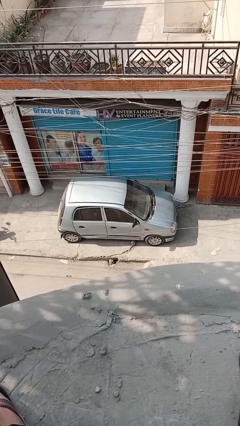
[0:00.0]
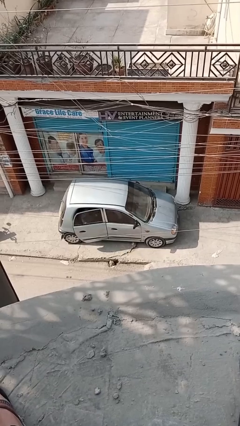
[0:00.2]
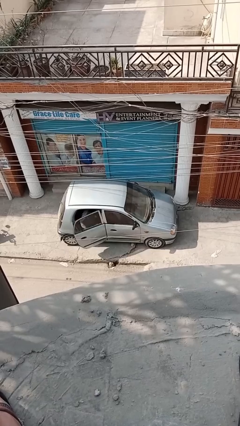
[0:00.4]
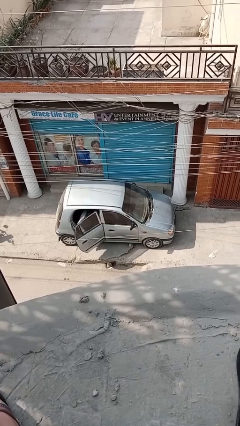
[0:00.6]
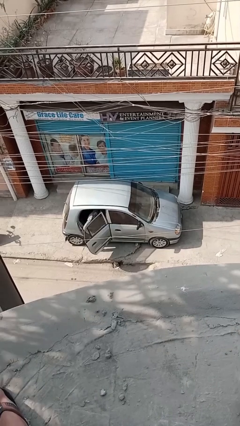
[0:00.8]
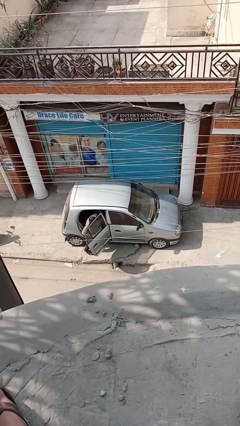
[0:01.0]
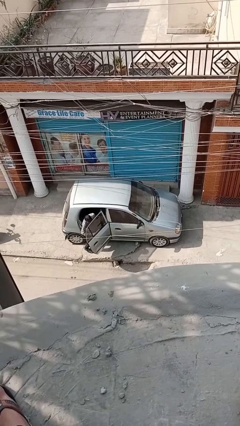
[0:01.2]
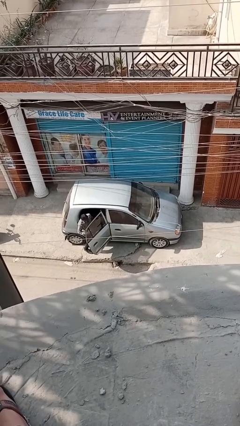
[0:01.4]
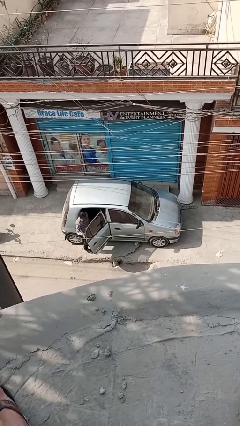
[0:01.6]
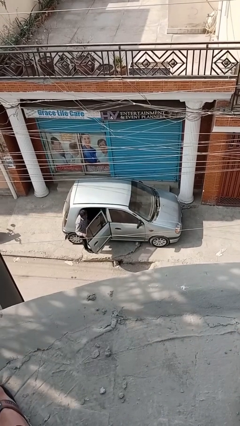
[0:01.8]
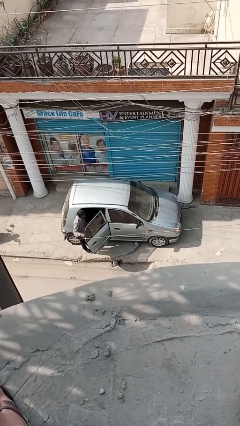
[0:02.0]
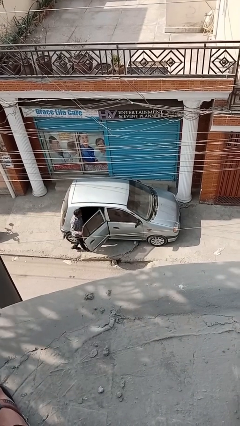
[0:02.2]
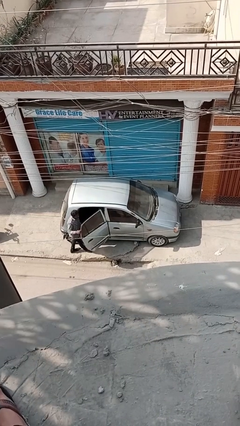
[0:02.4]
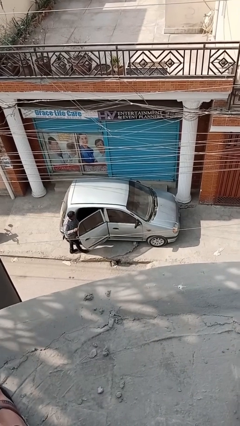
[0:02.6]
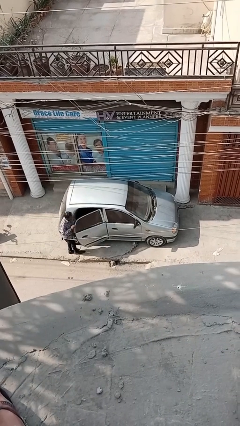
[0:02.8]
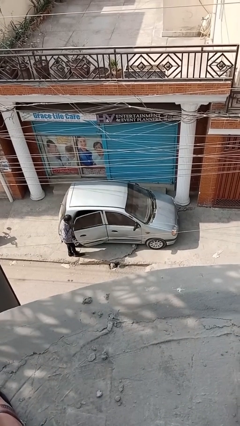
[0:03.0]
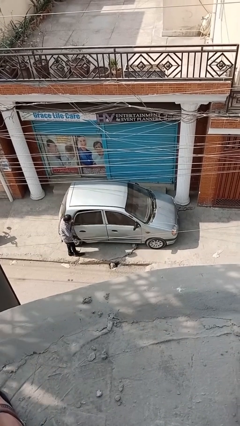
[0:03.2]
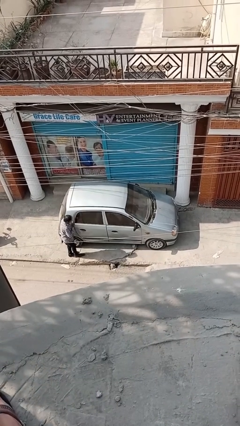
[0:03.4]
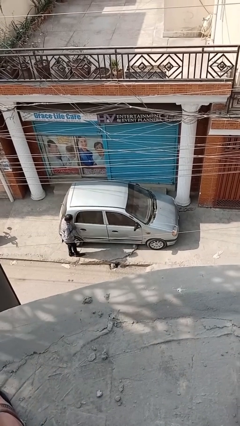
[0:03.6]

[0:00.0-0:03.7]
car drops off person

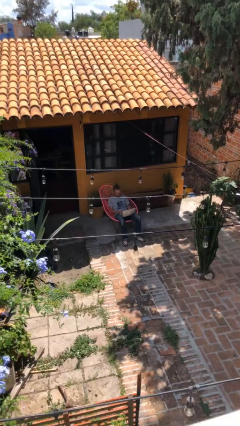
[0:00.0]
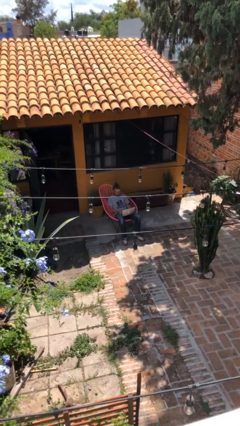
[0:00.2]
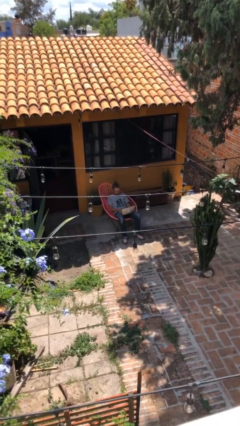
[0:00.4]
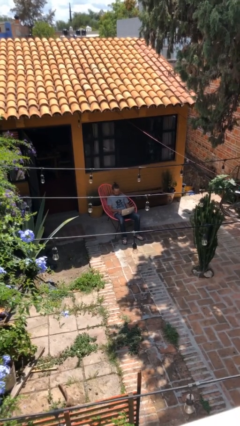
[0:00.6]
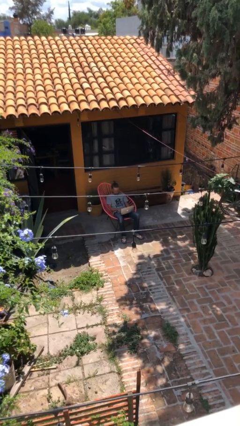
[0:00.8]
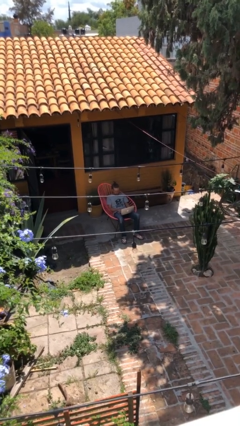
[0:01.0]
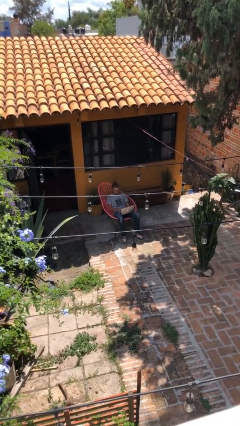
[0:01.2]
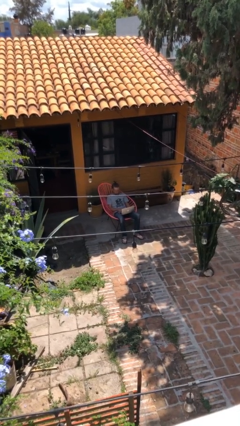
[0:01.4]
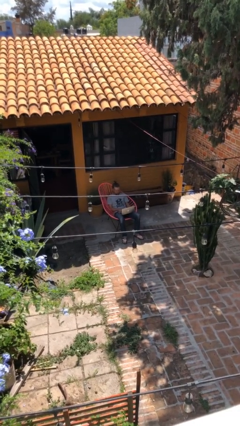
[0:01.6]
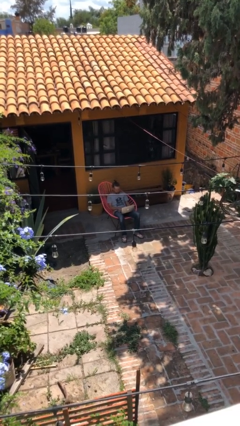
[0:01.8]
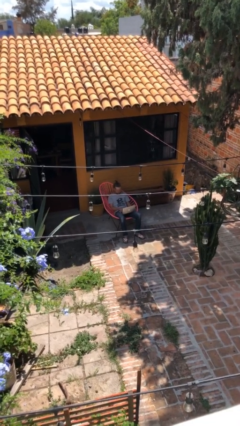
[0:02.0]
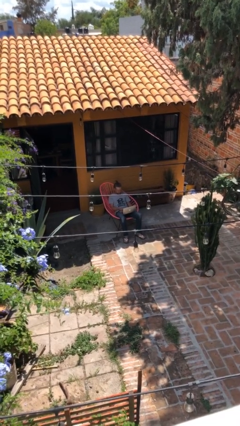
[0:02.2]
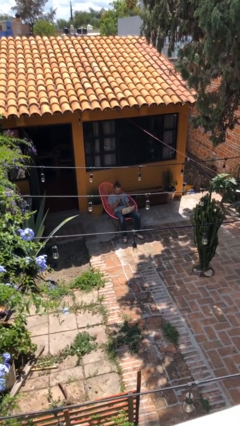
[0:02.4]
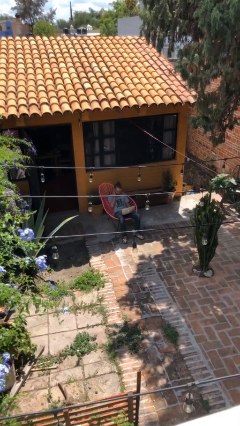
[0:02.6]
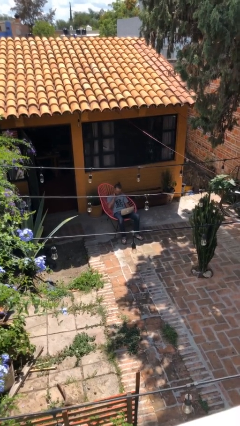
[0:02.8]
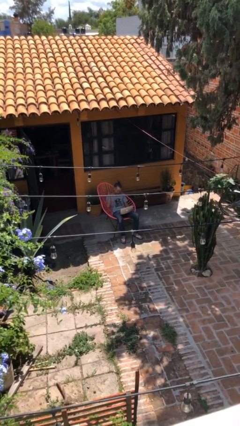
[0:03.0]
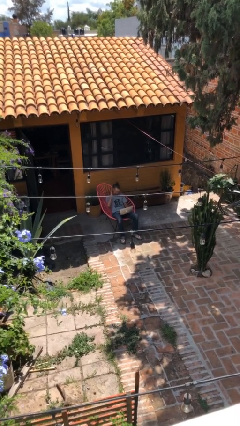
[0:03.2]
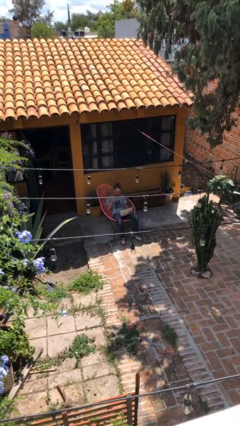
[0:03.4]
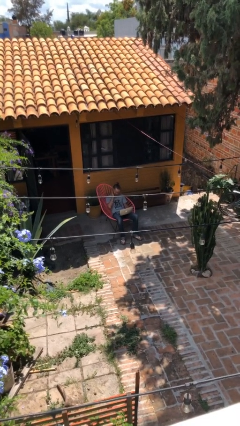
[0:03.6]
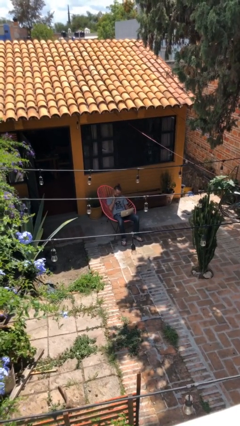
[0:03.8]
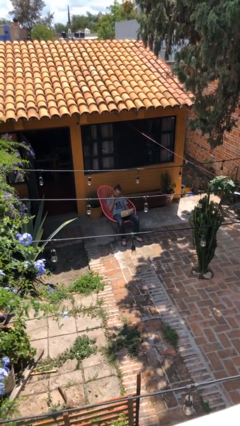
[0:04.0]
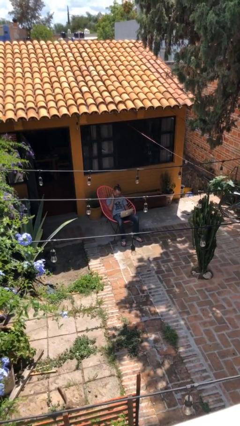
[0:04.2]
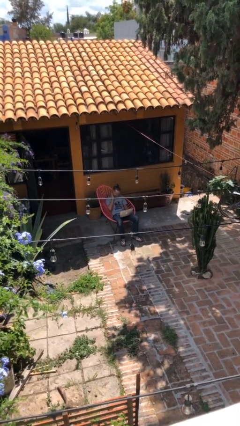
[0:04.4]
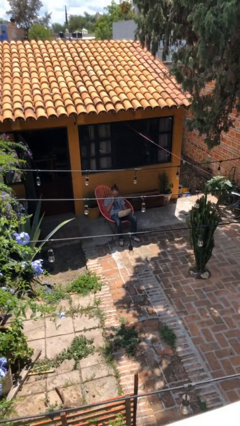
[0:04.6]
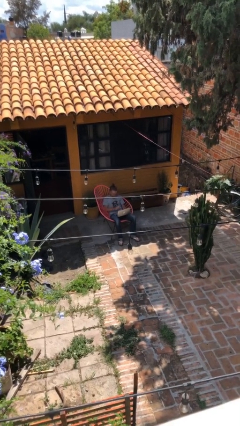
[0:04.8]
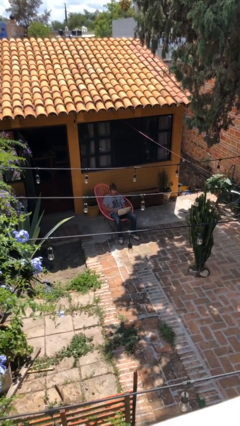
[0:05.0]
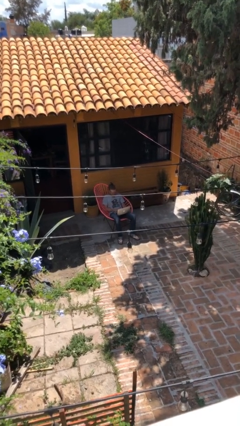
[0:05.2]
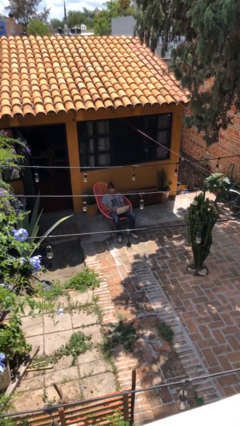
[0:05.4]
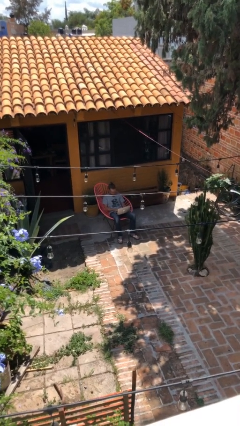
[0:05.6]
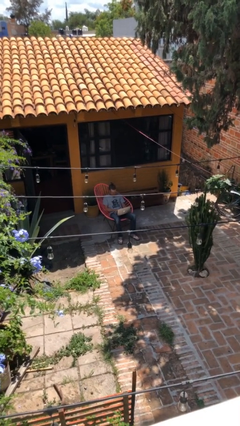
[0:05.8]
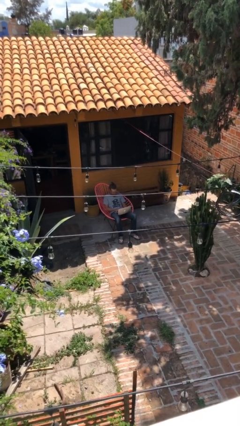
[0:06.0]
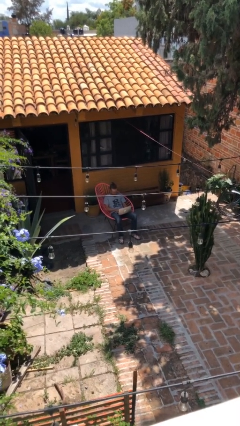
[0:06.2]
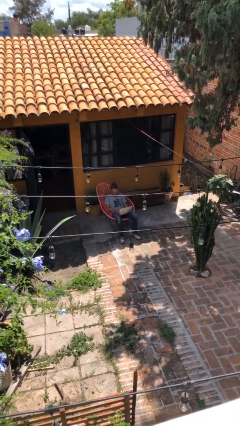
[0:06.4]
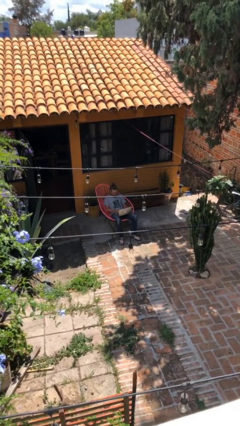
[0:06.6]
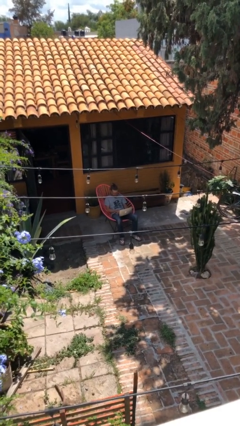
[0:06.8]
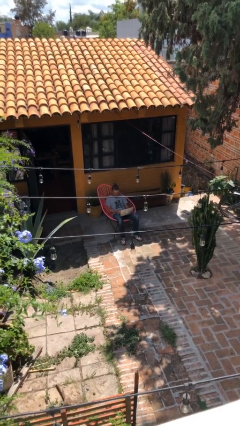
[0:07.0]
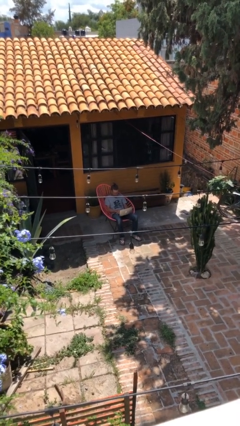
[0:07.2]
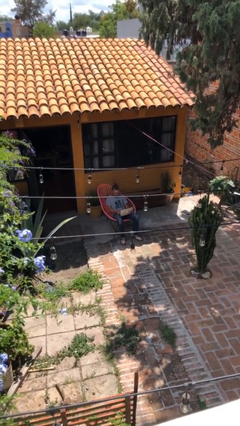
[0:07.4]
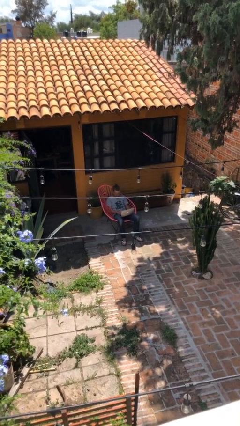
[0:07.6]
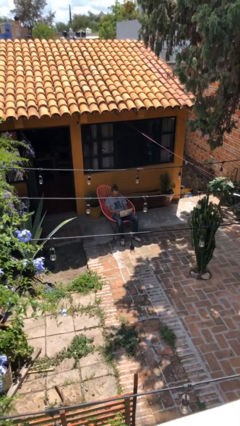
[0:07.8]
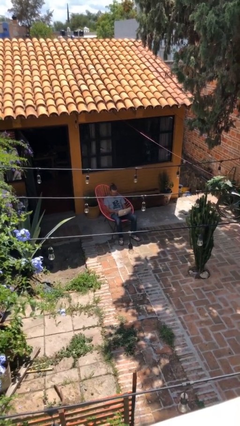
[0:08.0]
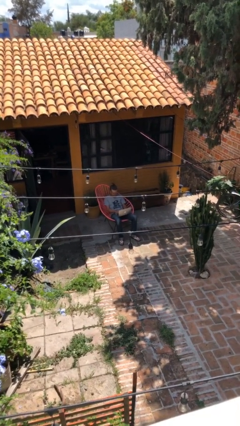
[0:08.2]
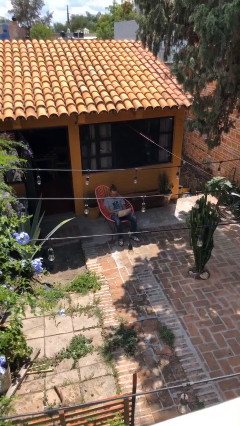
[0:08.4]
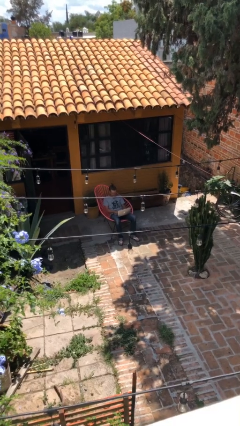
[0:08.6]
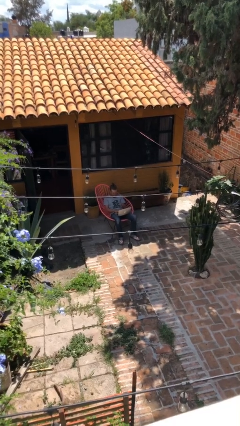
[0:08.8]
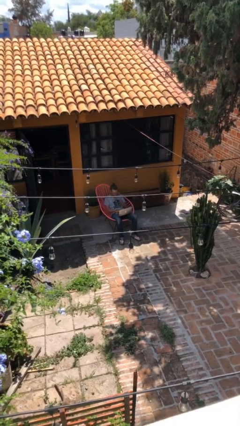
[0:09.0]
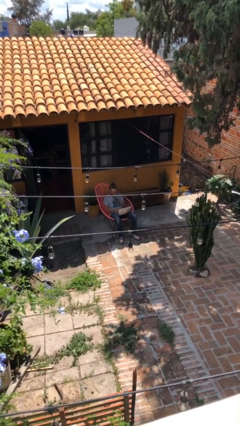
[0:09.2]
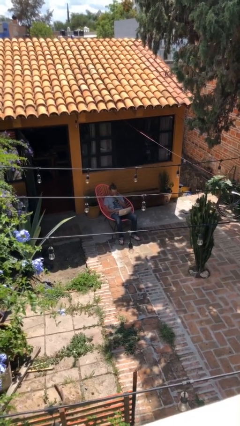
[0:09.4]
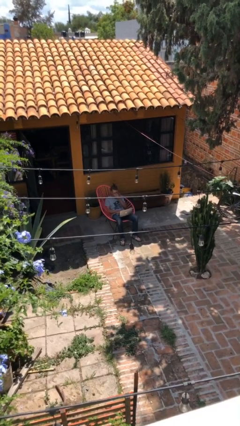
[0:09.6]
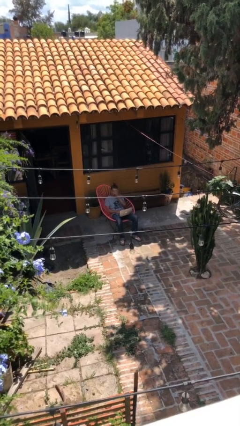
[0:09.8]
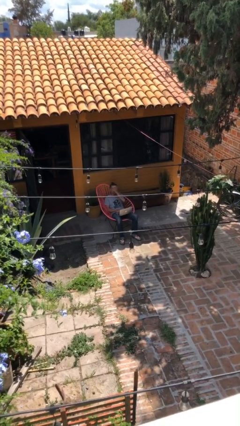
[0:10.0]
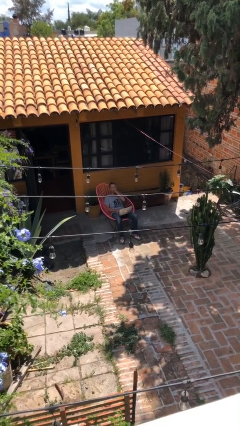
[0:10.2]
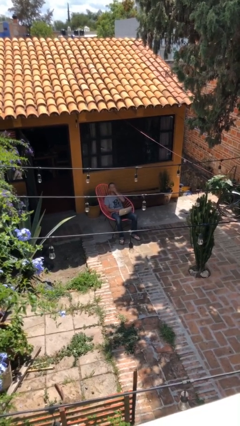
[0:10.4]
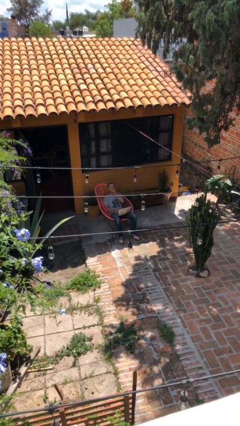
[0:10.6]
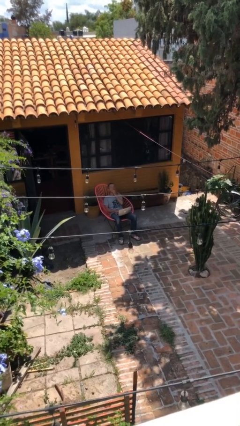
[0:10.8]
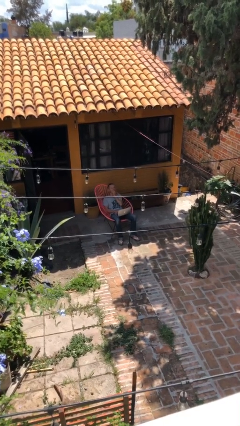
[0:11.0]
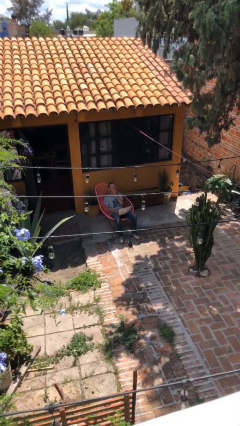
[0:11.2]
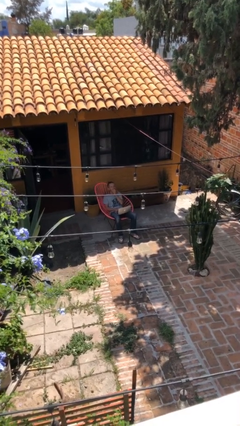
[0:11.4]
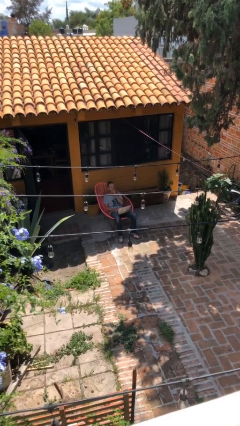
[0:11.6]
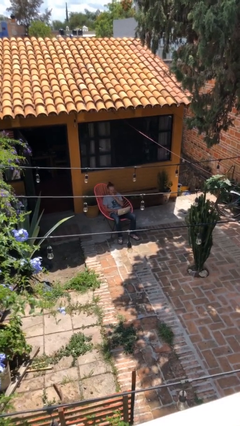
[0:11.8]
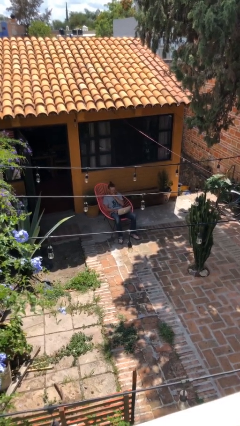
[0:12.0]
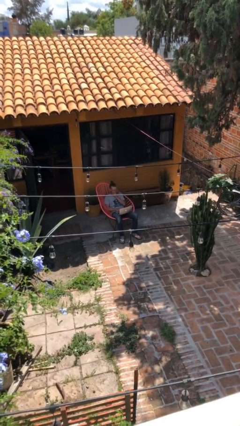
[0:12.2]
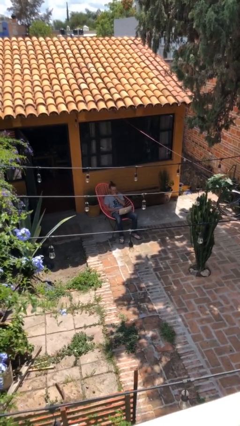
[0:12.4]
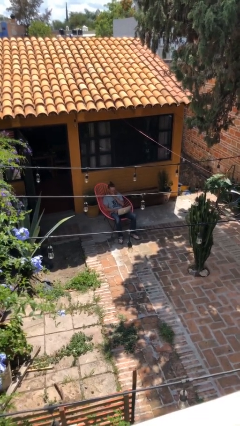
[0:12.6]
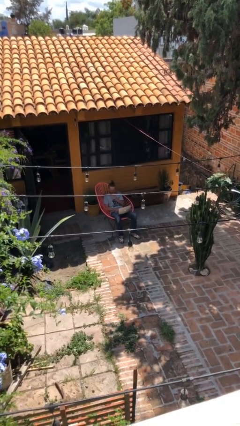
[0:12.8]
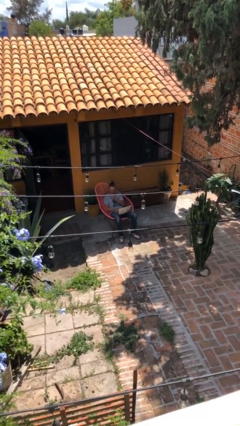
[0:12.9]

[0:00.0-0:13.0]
person interacts with laptop

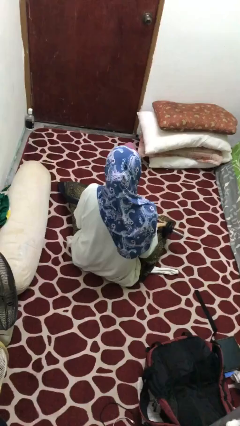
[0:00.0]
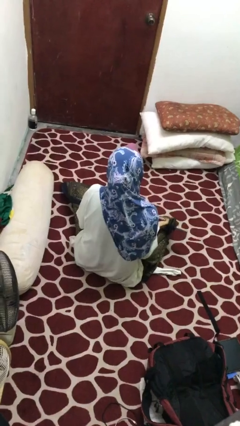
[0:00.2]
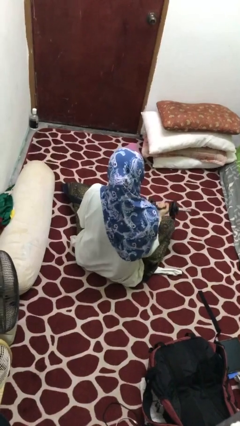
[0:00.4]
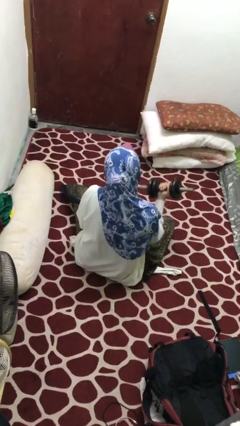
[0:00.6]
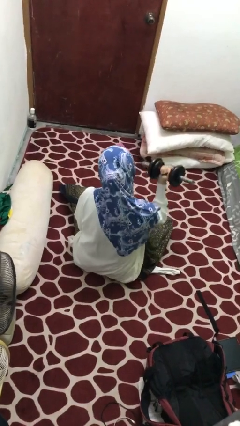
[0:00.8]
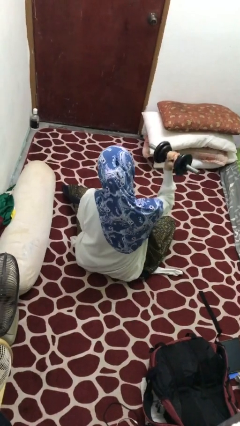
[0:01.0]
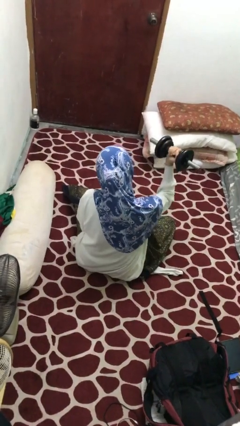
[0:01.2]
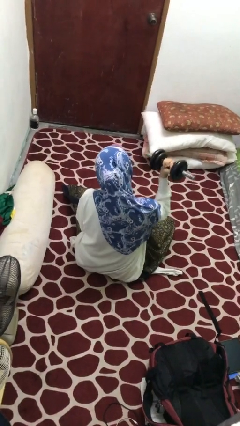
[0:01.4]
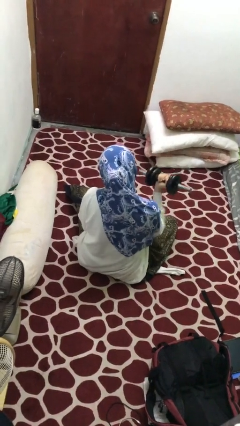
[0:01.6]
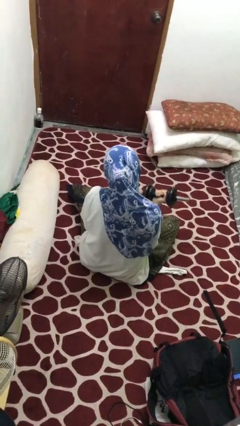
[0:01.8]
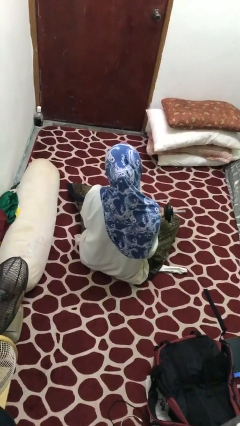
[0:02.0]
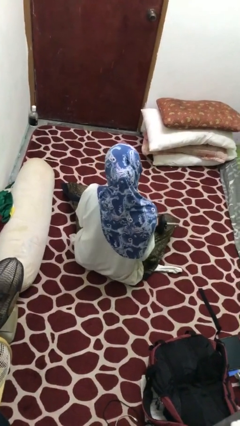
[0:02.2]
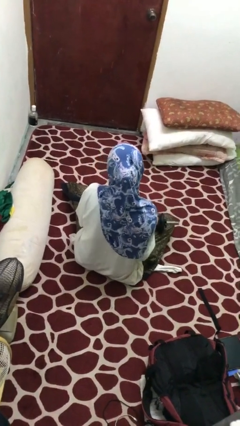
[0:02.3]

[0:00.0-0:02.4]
person lifts dumbbells
